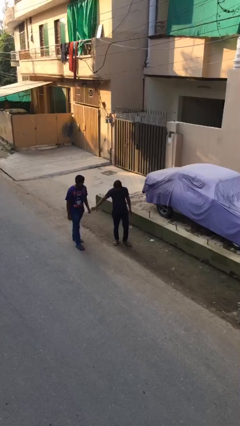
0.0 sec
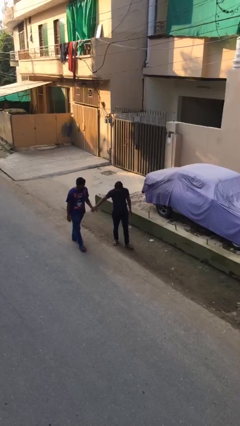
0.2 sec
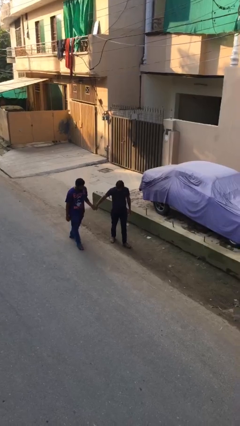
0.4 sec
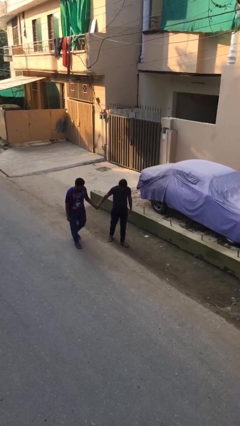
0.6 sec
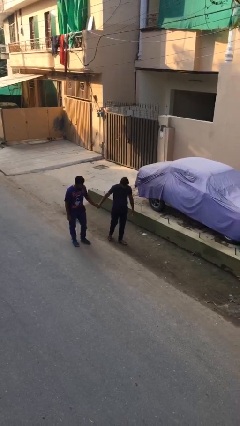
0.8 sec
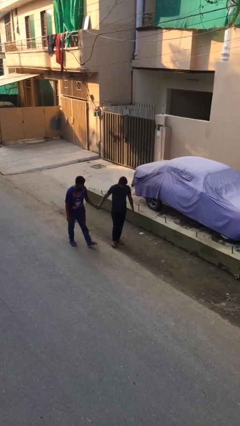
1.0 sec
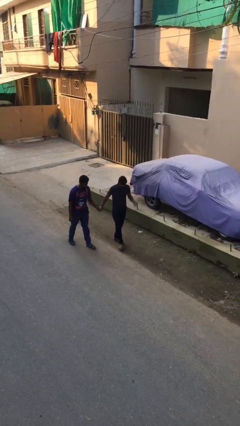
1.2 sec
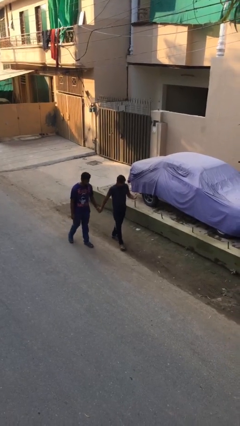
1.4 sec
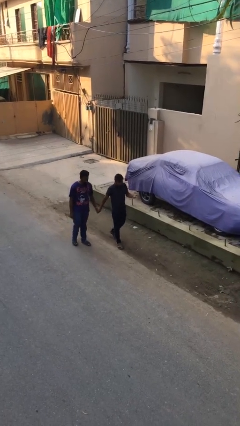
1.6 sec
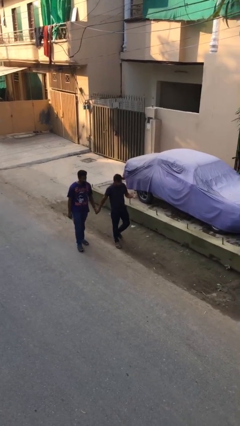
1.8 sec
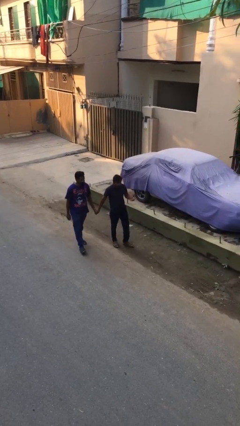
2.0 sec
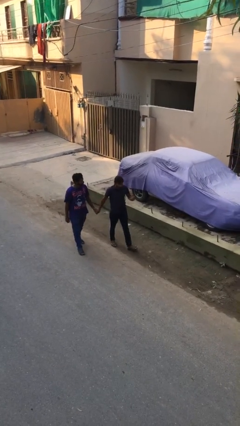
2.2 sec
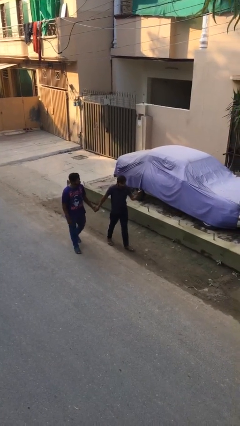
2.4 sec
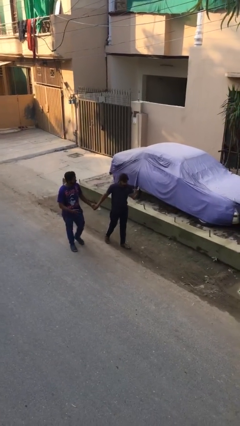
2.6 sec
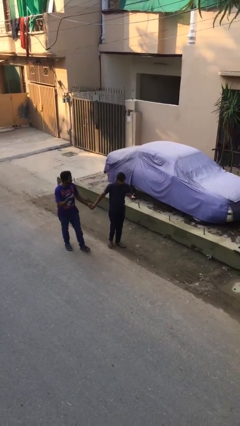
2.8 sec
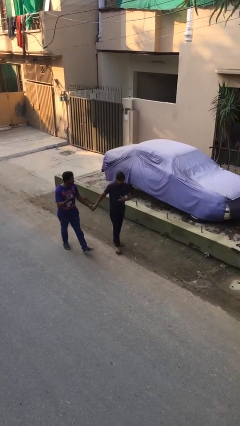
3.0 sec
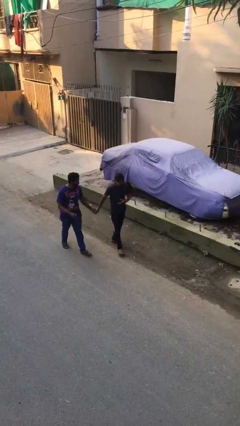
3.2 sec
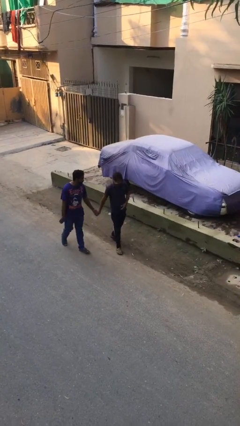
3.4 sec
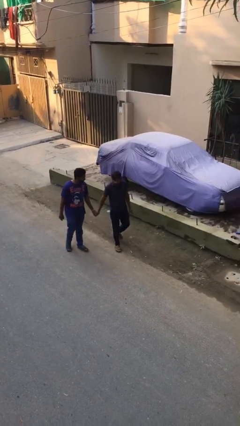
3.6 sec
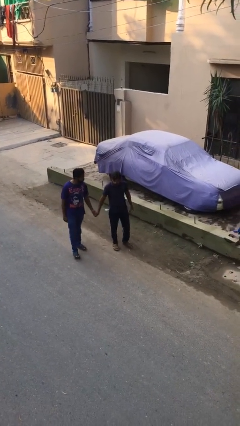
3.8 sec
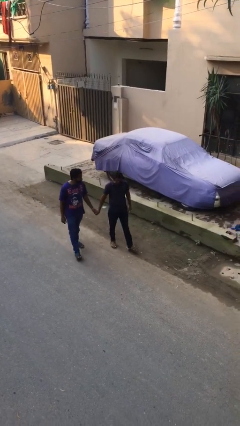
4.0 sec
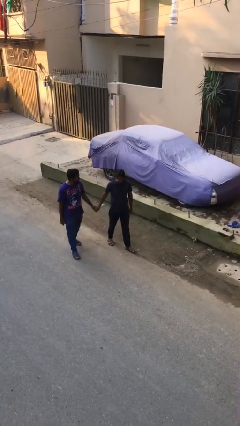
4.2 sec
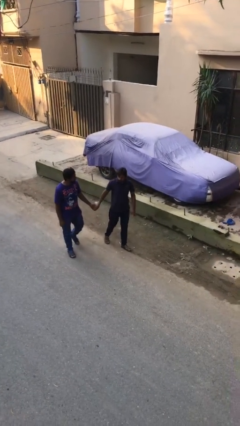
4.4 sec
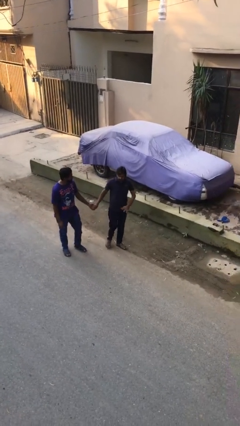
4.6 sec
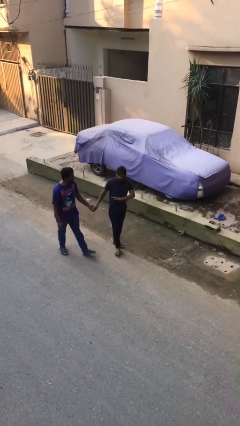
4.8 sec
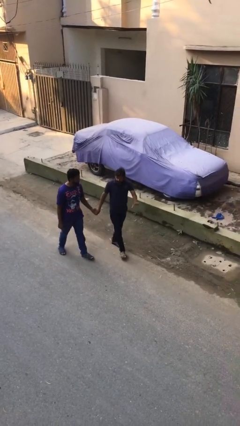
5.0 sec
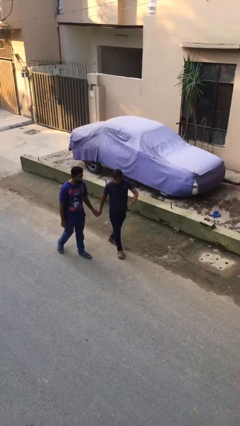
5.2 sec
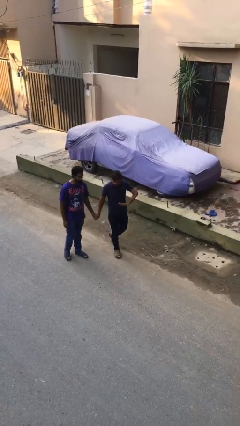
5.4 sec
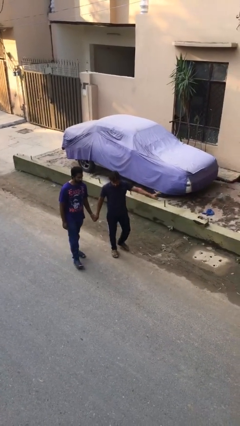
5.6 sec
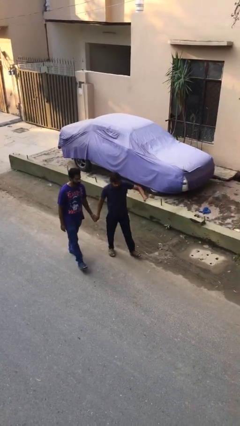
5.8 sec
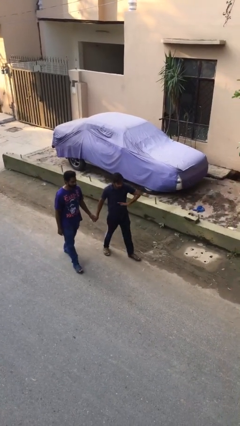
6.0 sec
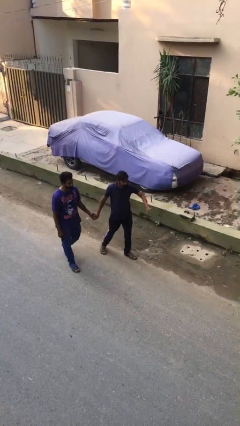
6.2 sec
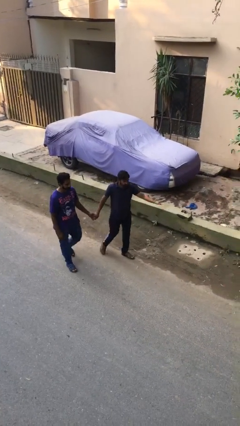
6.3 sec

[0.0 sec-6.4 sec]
person holds hand

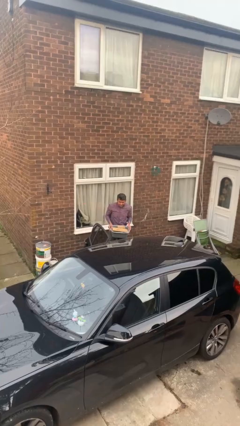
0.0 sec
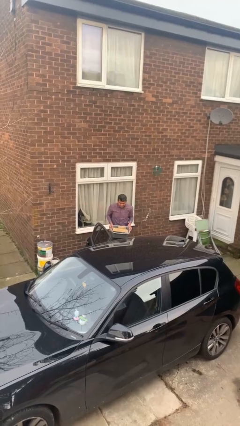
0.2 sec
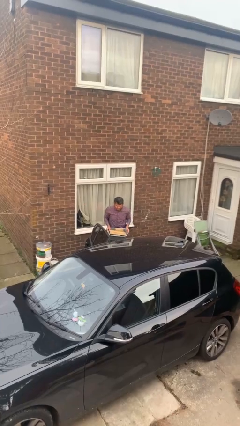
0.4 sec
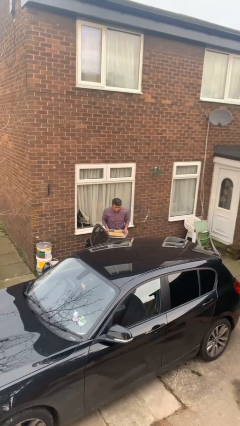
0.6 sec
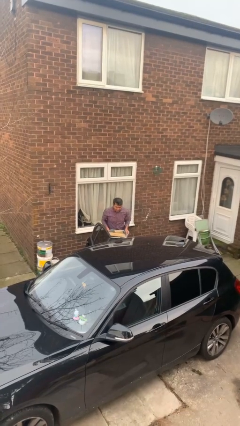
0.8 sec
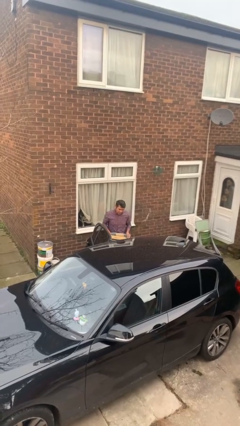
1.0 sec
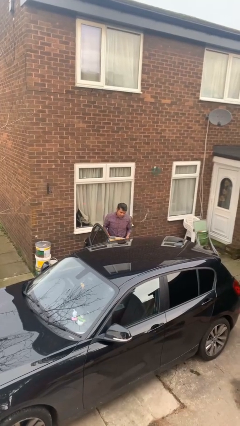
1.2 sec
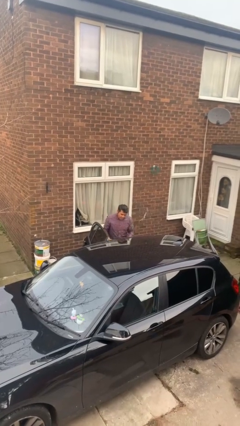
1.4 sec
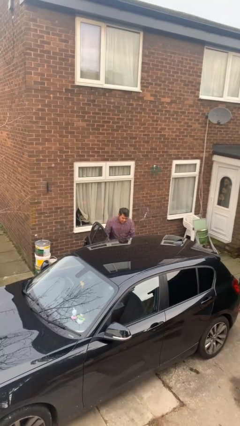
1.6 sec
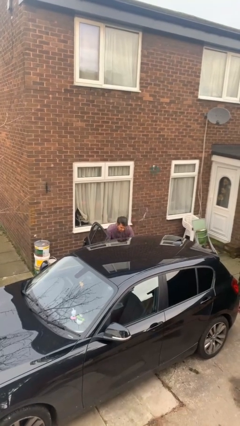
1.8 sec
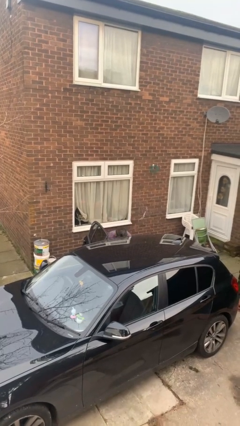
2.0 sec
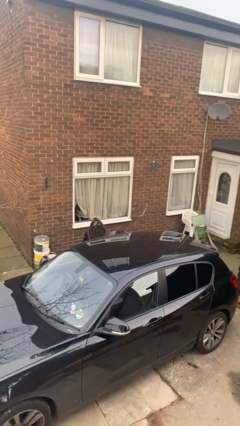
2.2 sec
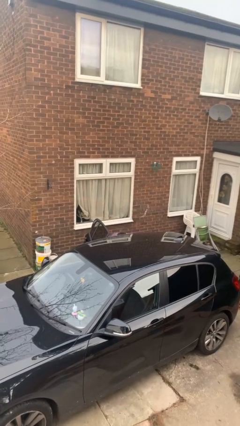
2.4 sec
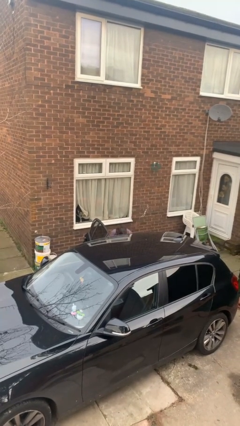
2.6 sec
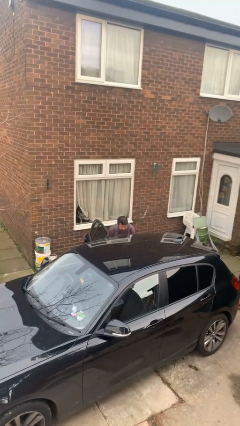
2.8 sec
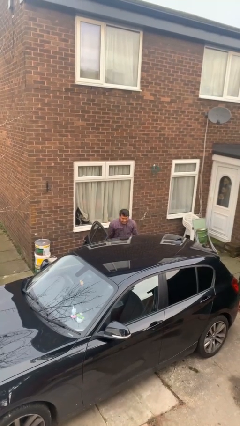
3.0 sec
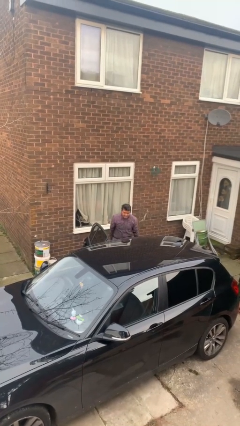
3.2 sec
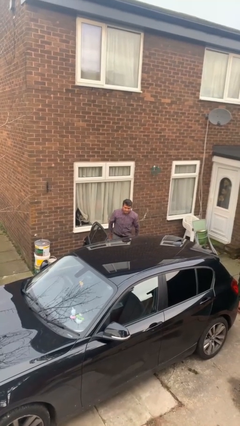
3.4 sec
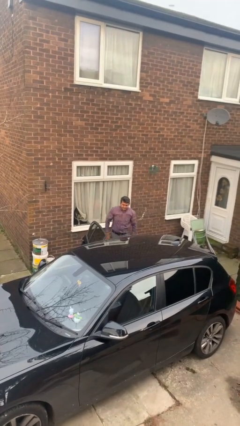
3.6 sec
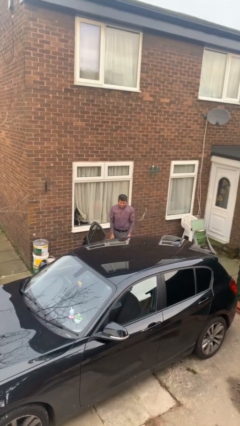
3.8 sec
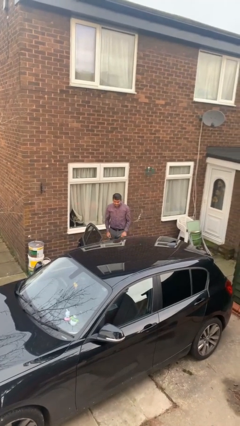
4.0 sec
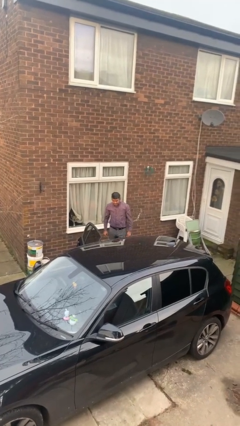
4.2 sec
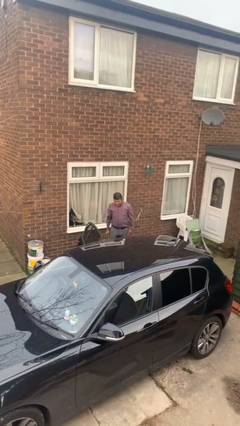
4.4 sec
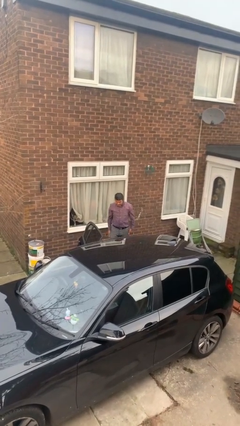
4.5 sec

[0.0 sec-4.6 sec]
person loads car

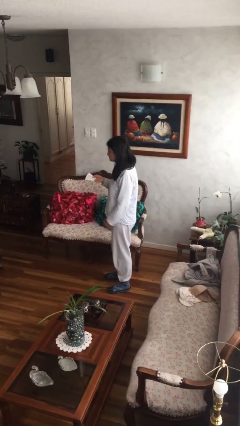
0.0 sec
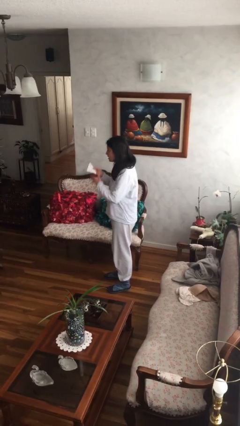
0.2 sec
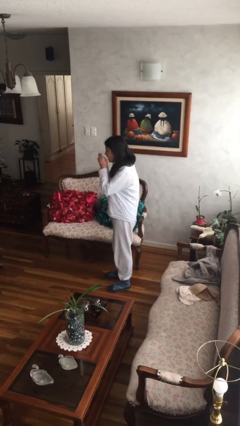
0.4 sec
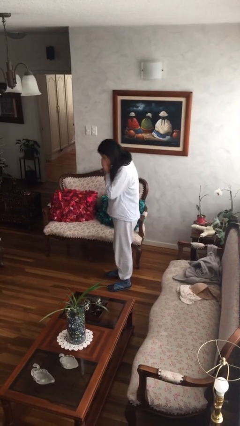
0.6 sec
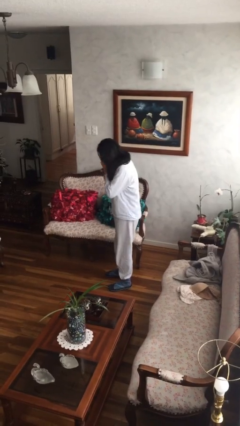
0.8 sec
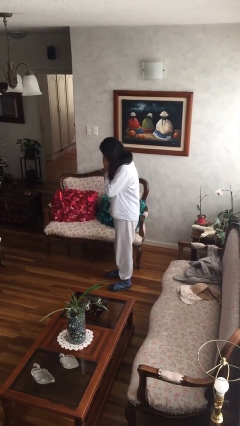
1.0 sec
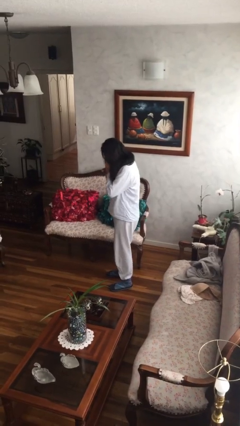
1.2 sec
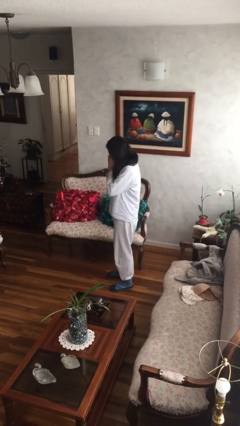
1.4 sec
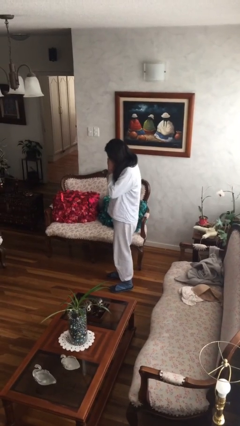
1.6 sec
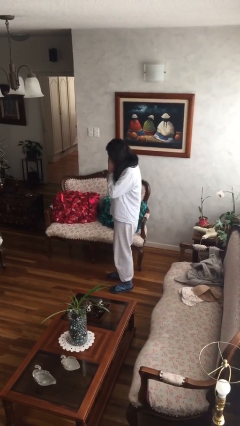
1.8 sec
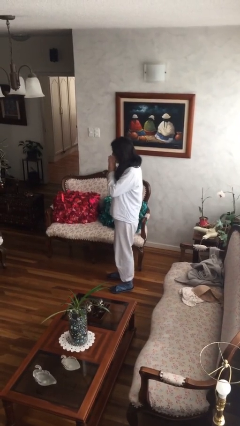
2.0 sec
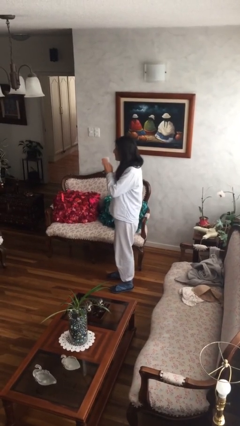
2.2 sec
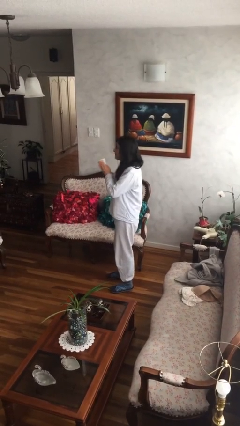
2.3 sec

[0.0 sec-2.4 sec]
person blows nose

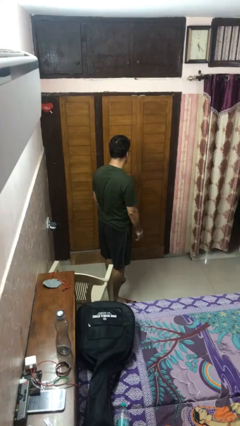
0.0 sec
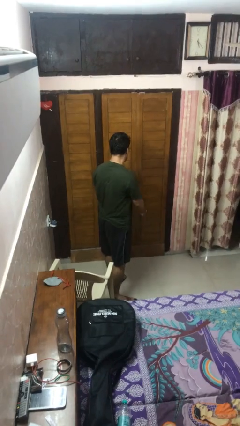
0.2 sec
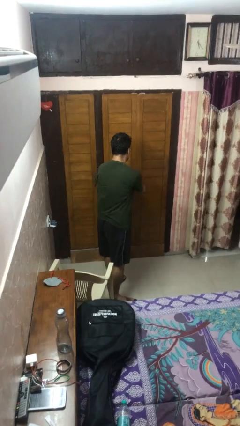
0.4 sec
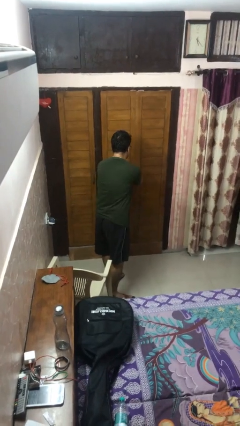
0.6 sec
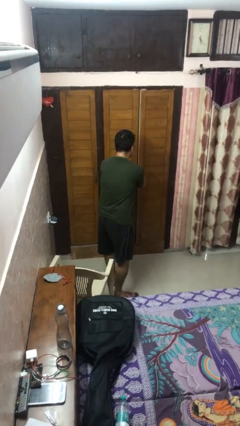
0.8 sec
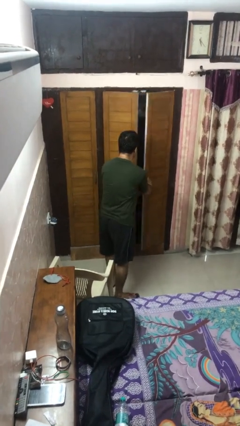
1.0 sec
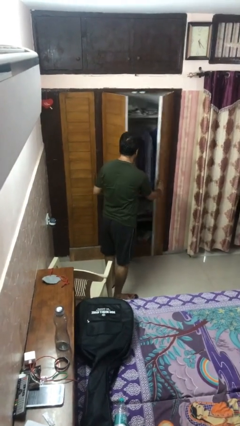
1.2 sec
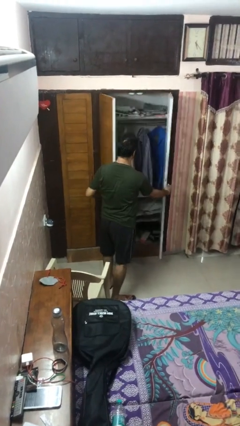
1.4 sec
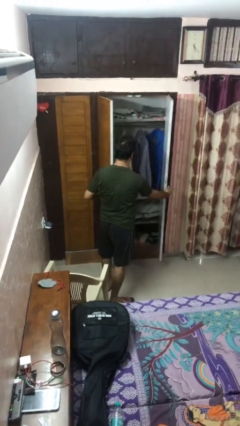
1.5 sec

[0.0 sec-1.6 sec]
person opens closet door

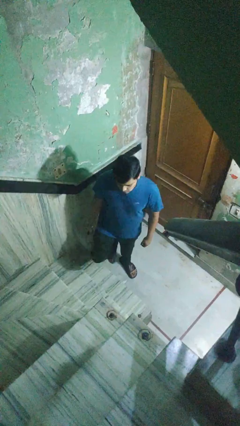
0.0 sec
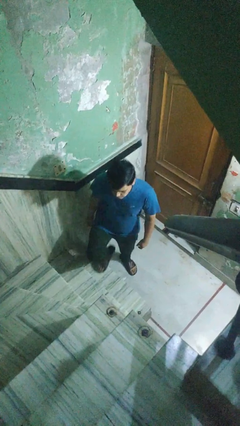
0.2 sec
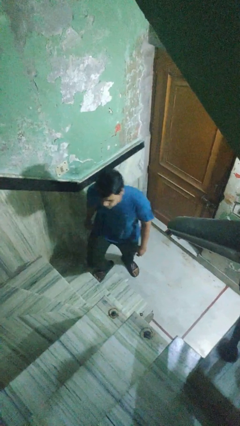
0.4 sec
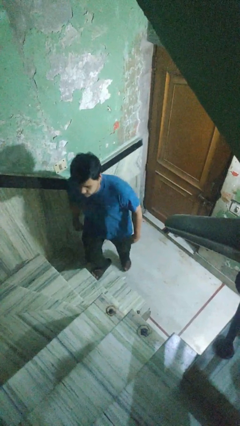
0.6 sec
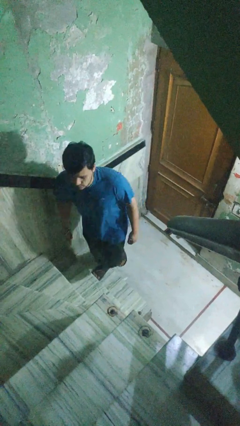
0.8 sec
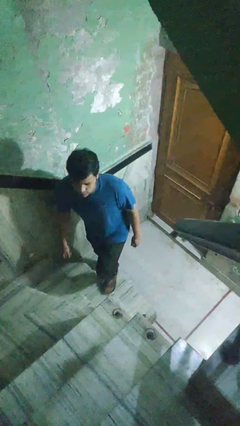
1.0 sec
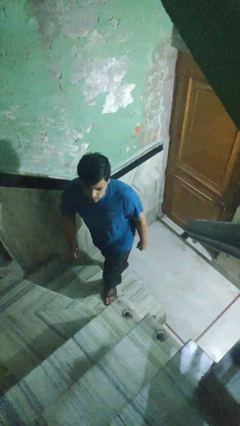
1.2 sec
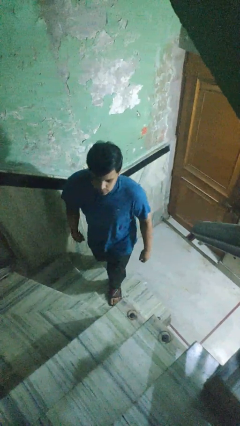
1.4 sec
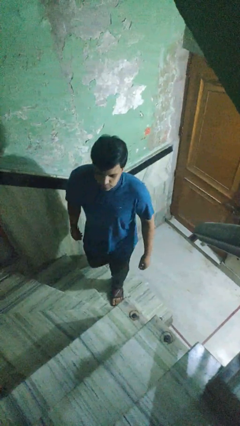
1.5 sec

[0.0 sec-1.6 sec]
person climbs up stairs

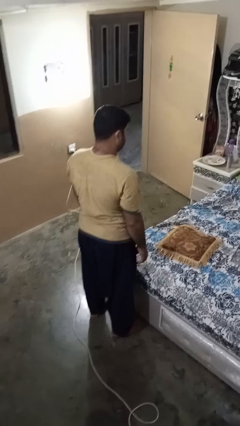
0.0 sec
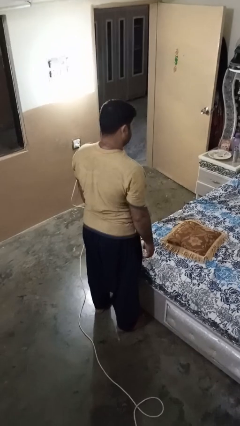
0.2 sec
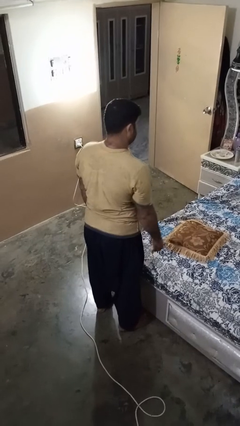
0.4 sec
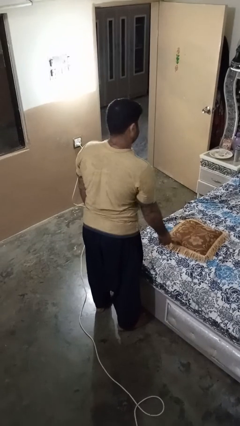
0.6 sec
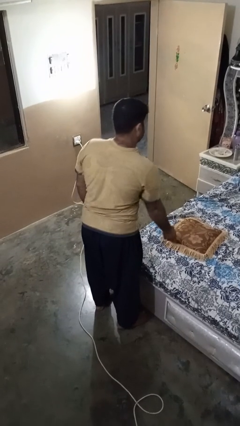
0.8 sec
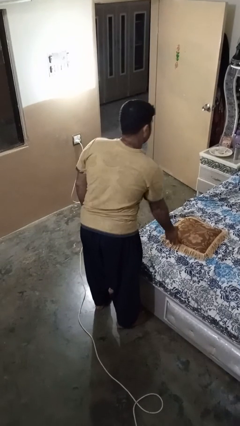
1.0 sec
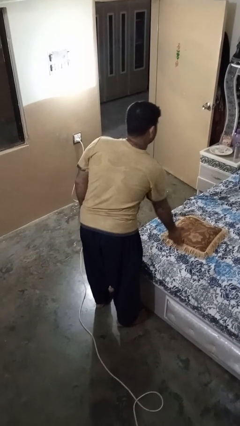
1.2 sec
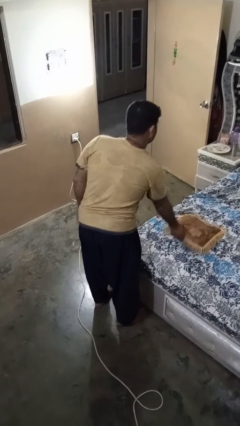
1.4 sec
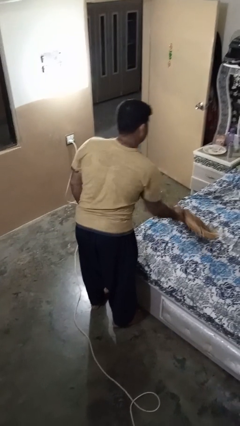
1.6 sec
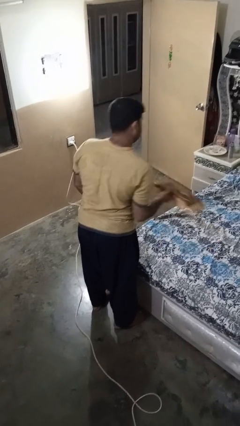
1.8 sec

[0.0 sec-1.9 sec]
person picks up object from bed
